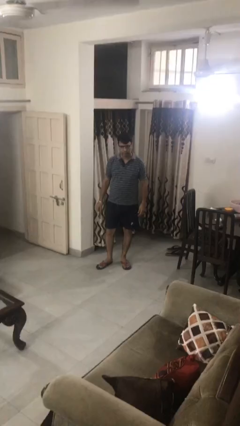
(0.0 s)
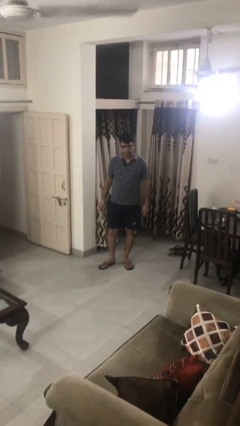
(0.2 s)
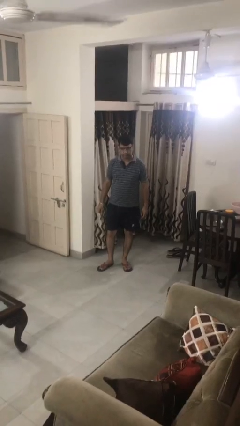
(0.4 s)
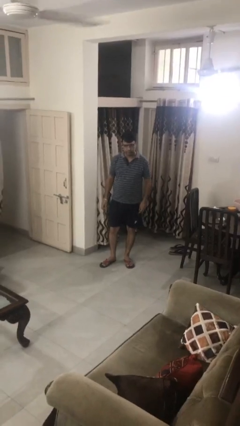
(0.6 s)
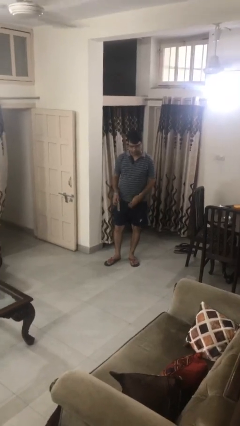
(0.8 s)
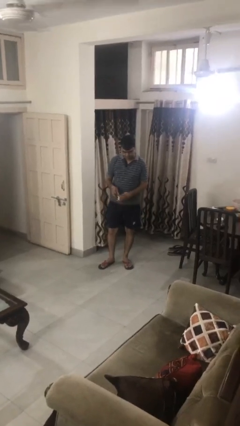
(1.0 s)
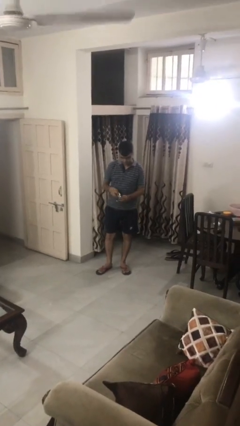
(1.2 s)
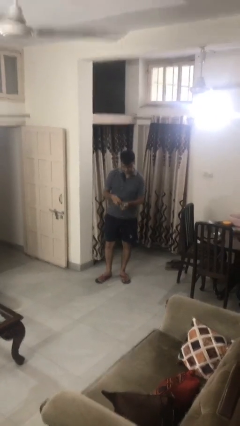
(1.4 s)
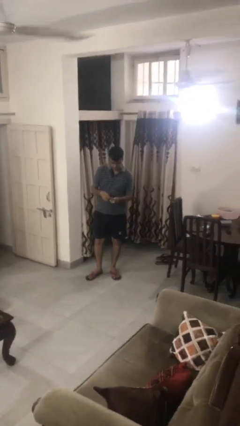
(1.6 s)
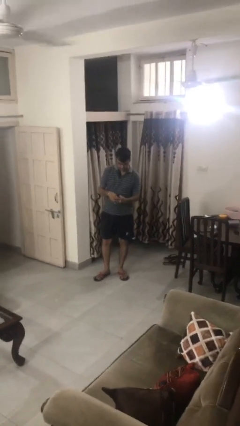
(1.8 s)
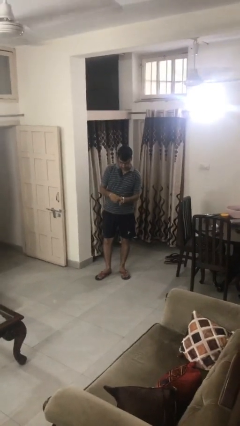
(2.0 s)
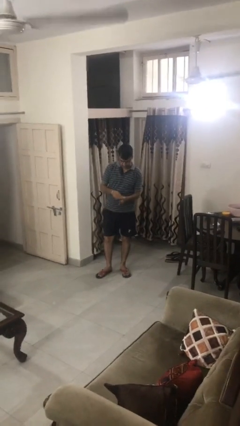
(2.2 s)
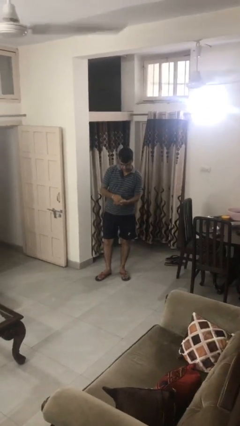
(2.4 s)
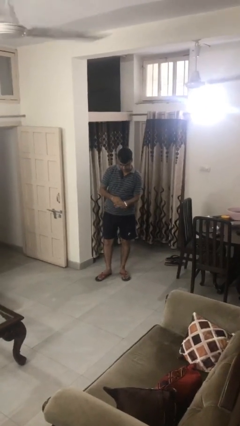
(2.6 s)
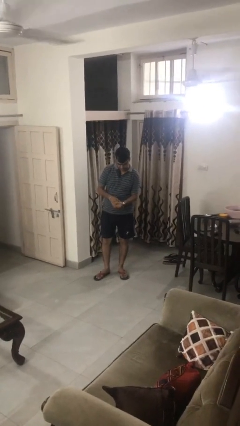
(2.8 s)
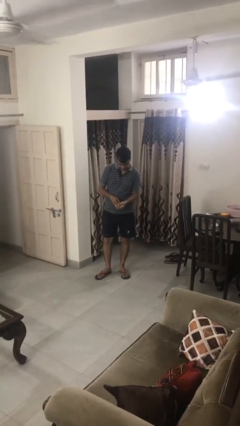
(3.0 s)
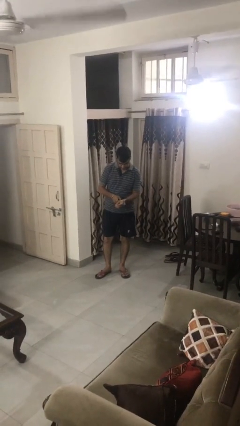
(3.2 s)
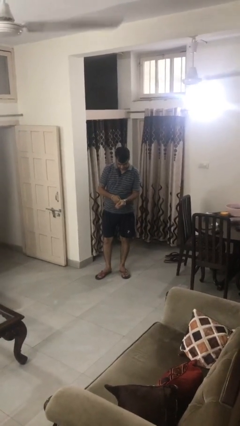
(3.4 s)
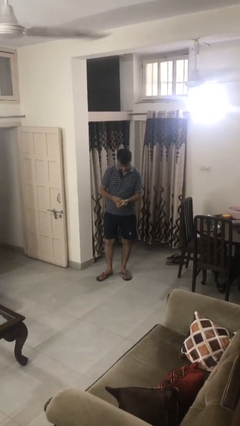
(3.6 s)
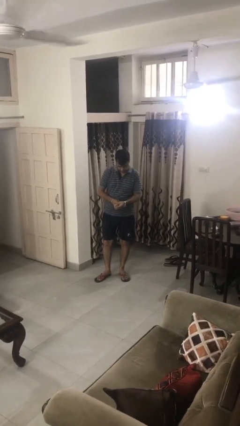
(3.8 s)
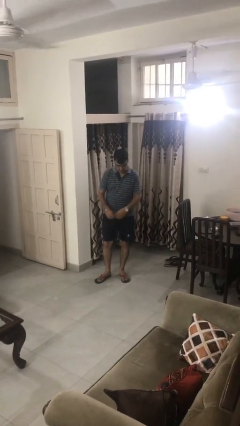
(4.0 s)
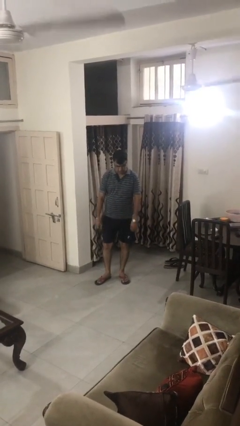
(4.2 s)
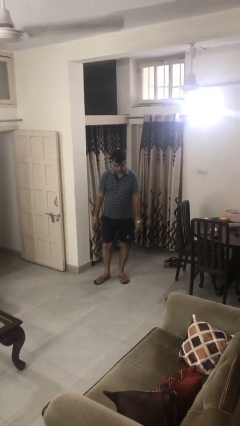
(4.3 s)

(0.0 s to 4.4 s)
person puts on wristwatch

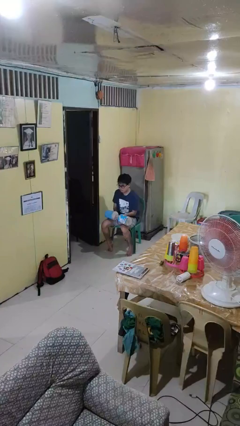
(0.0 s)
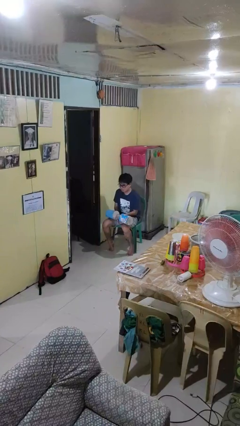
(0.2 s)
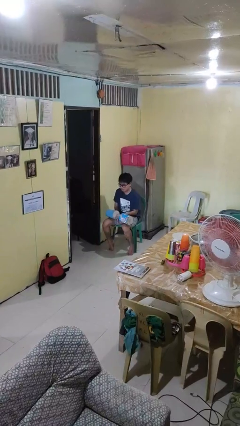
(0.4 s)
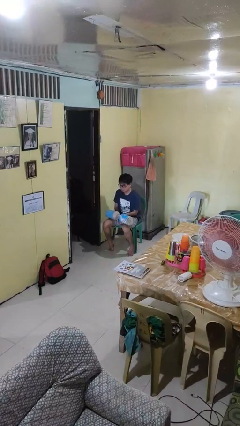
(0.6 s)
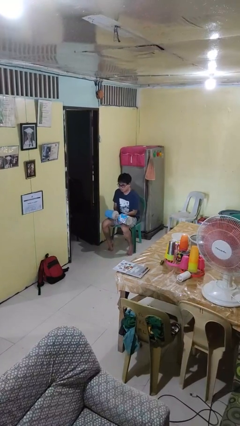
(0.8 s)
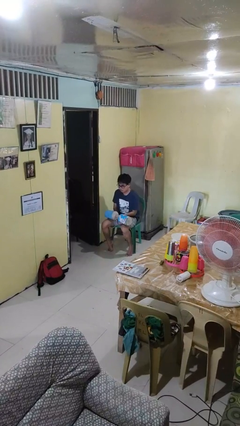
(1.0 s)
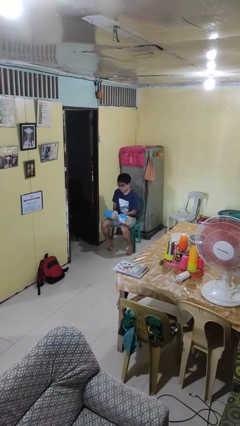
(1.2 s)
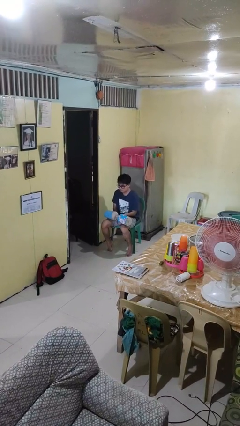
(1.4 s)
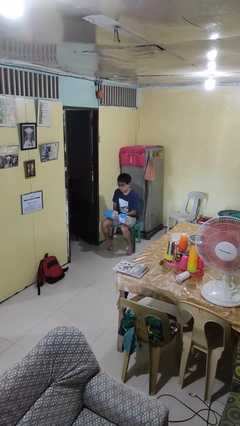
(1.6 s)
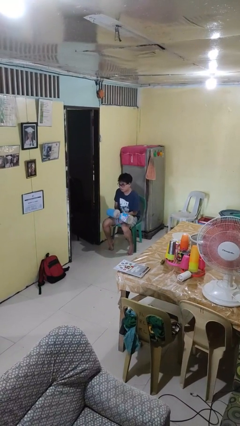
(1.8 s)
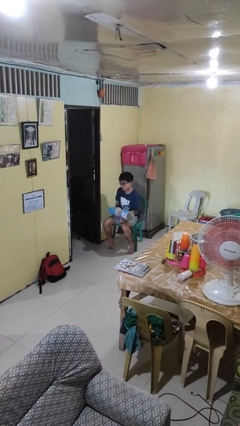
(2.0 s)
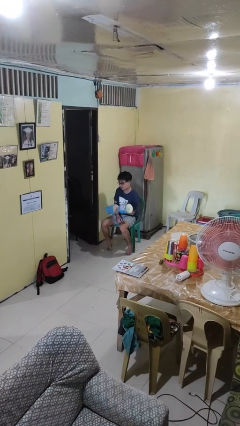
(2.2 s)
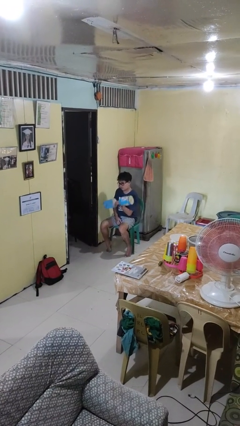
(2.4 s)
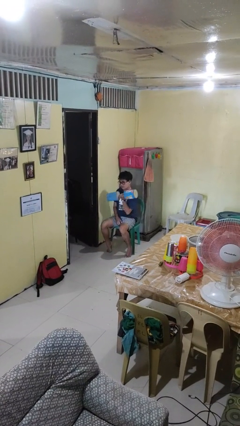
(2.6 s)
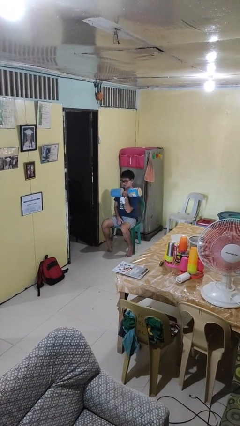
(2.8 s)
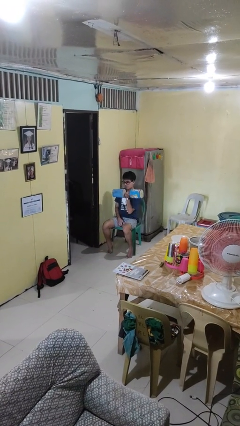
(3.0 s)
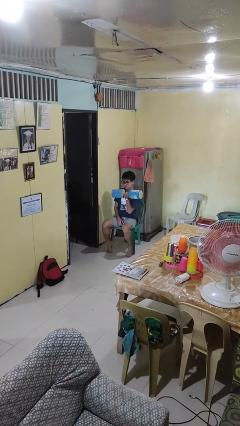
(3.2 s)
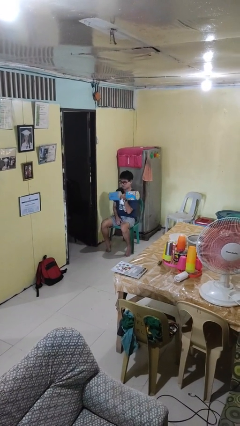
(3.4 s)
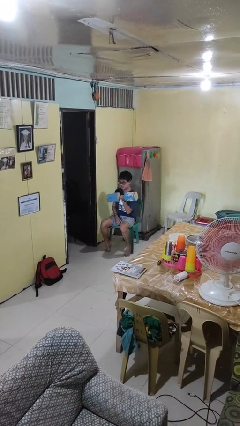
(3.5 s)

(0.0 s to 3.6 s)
person lifts dumbbells

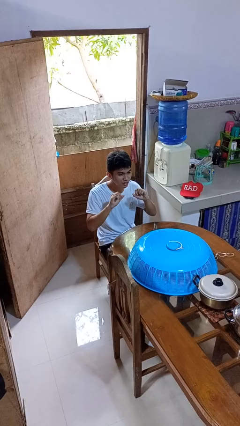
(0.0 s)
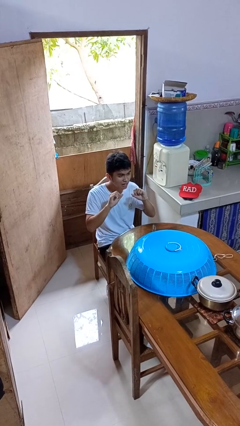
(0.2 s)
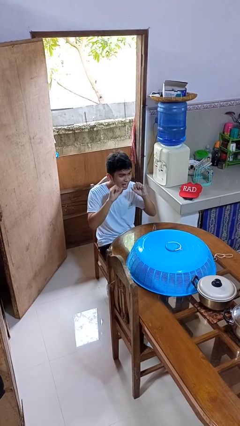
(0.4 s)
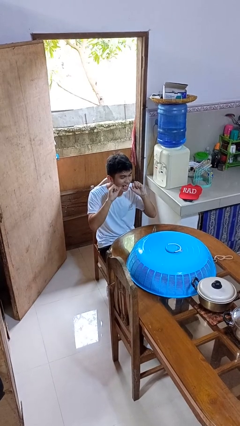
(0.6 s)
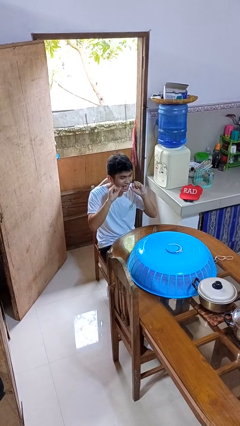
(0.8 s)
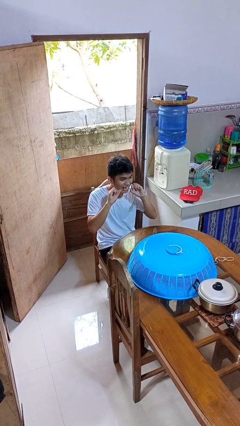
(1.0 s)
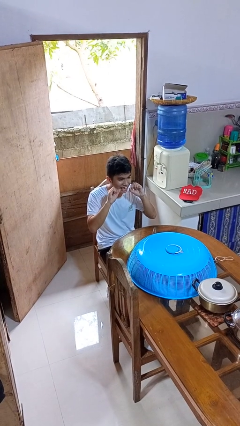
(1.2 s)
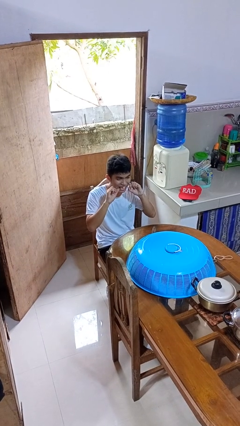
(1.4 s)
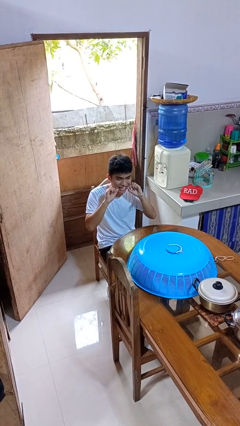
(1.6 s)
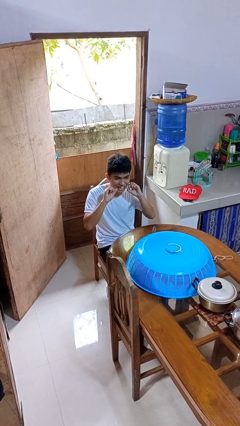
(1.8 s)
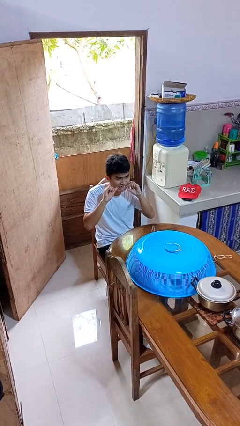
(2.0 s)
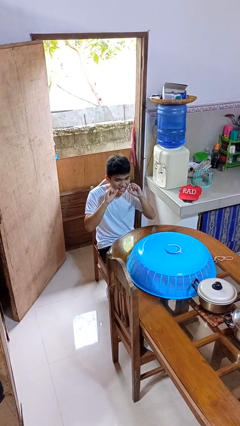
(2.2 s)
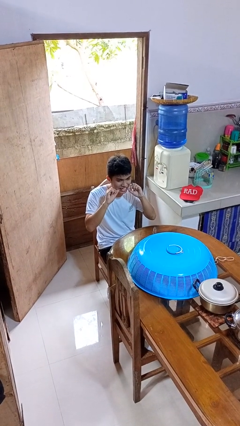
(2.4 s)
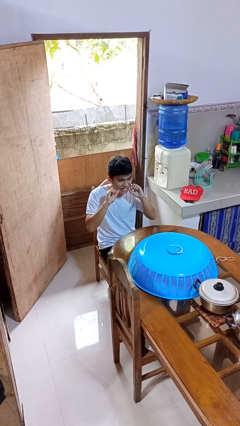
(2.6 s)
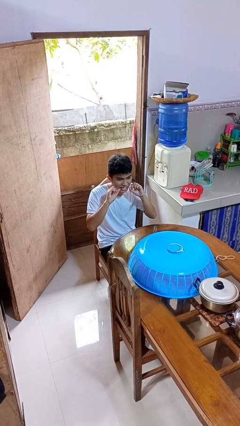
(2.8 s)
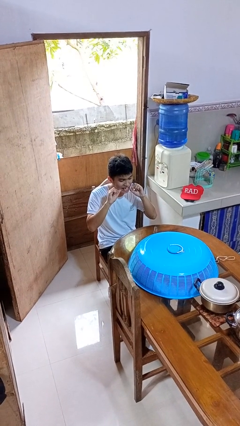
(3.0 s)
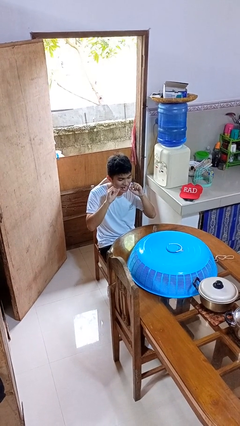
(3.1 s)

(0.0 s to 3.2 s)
person flosses

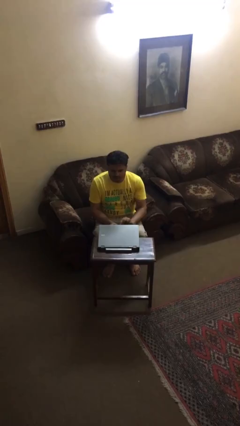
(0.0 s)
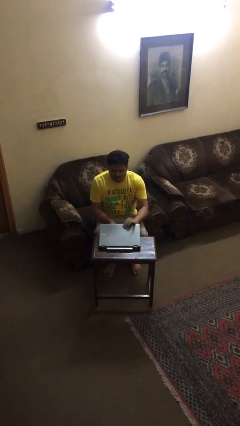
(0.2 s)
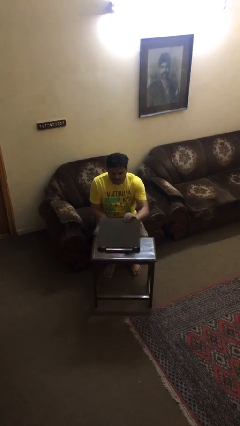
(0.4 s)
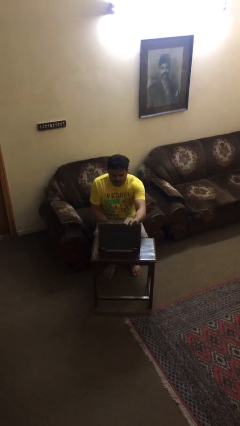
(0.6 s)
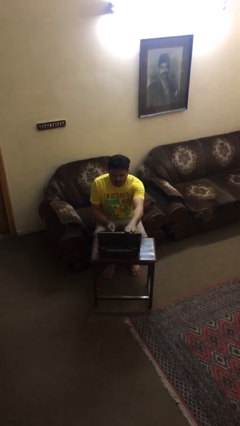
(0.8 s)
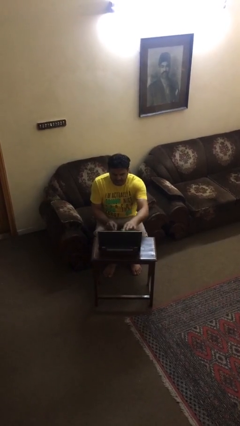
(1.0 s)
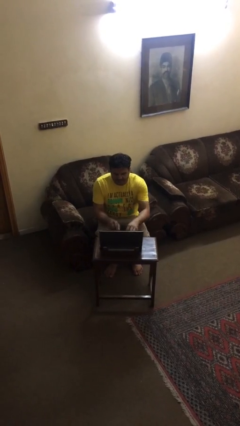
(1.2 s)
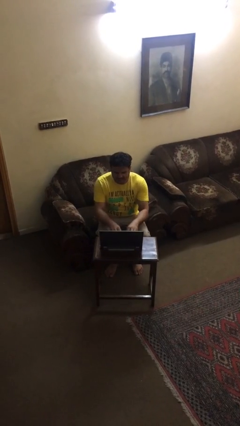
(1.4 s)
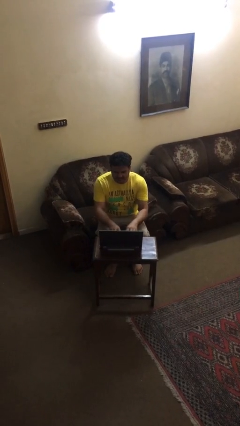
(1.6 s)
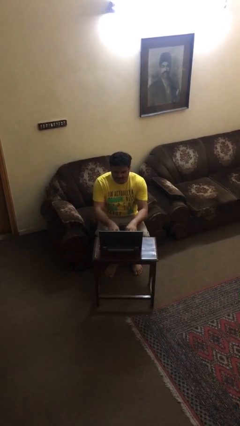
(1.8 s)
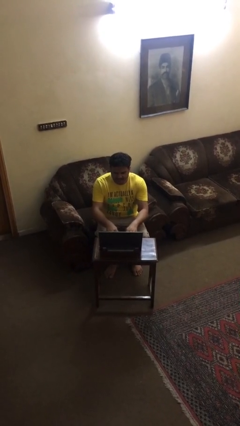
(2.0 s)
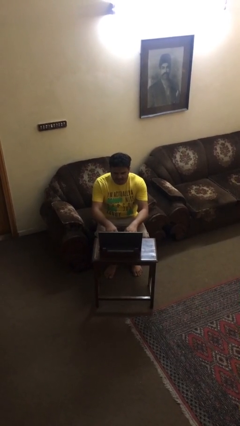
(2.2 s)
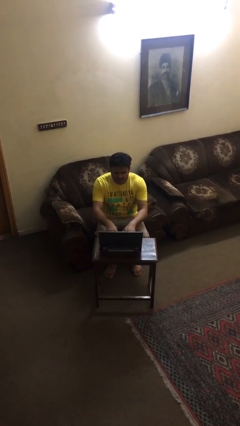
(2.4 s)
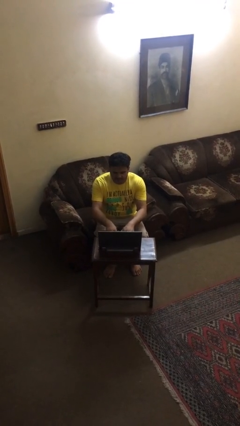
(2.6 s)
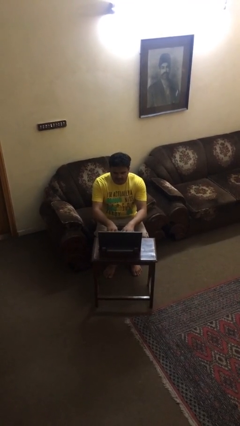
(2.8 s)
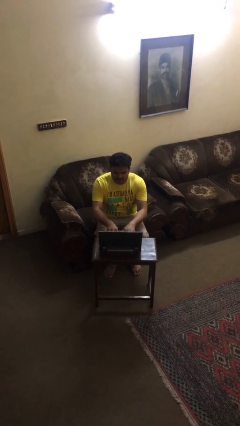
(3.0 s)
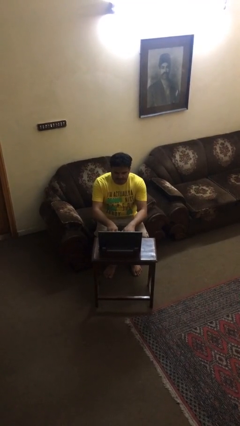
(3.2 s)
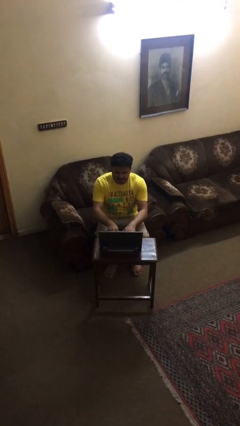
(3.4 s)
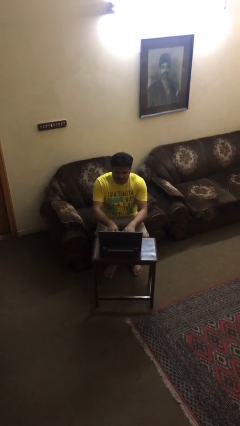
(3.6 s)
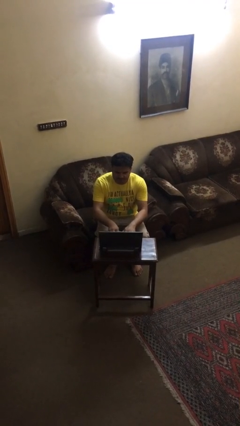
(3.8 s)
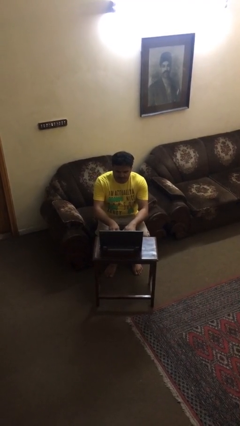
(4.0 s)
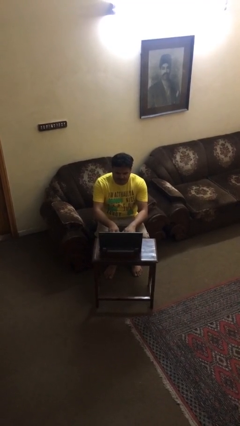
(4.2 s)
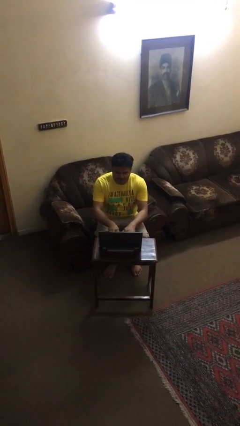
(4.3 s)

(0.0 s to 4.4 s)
person interacts with laptop

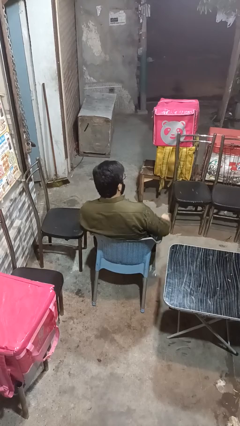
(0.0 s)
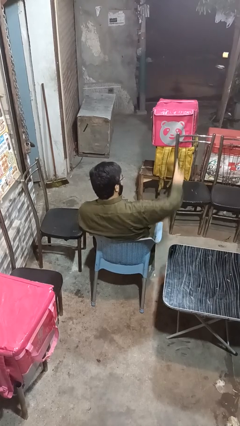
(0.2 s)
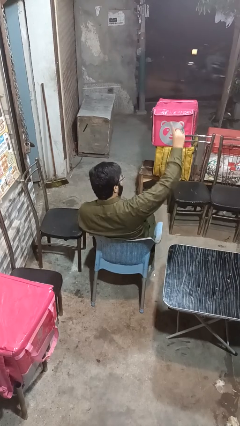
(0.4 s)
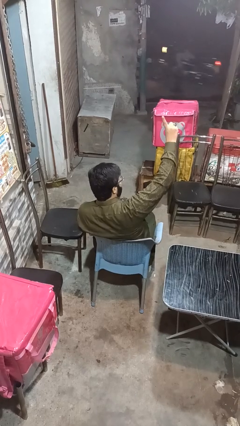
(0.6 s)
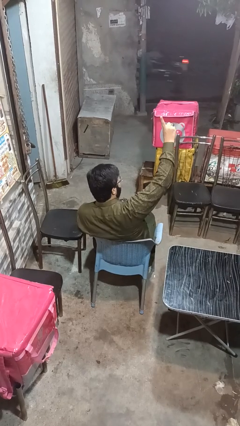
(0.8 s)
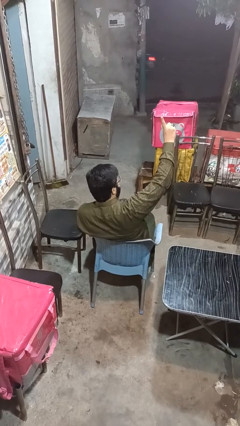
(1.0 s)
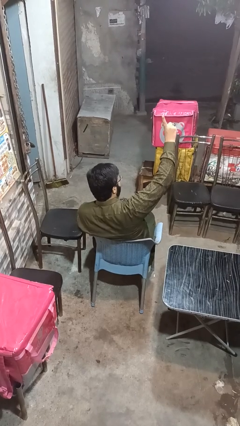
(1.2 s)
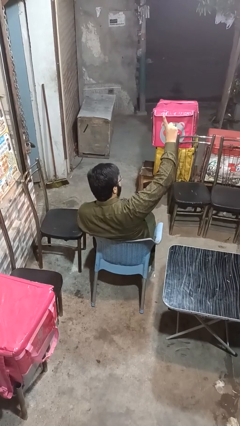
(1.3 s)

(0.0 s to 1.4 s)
person gestures number one

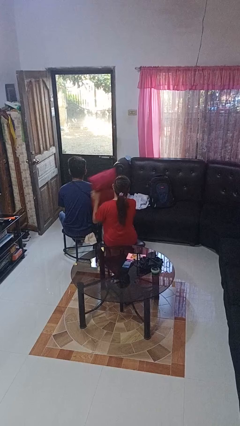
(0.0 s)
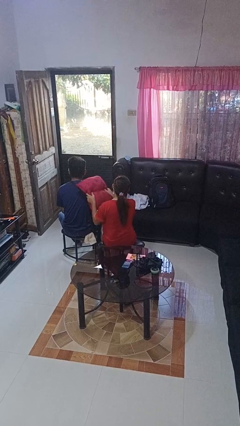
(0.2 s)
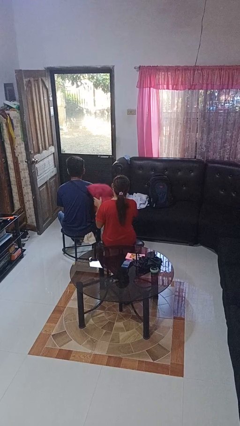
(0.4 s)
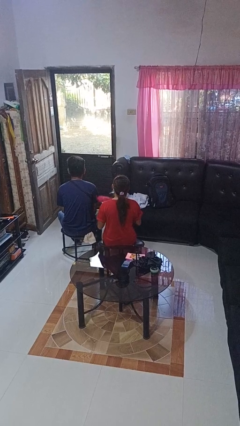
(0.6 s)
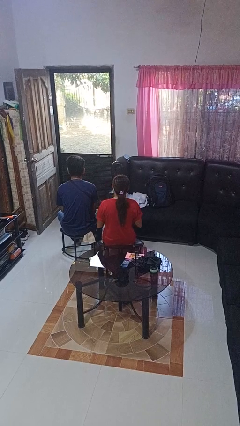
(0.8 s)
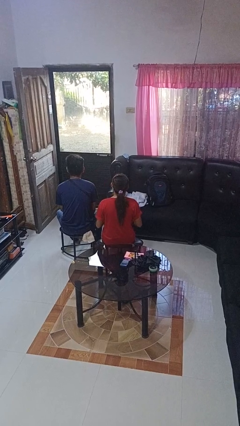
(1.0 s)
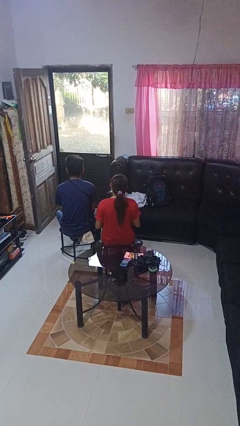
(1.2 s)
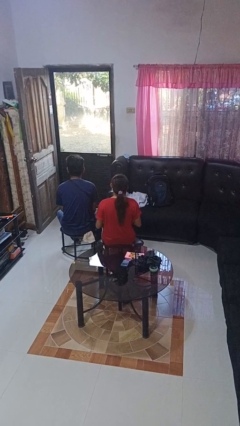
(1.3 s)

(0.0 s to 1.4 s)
person hits person with pillow
